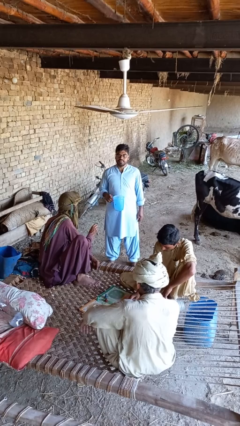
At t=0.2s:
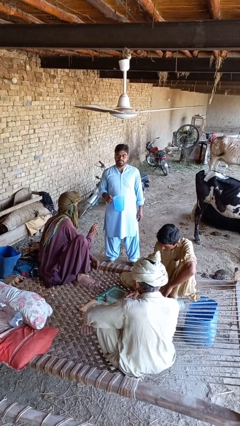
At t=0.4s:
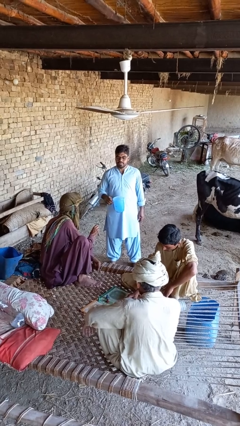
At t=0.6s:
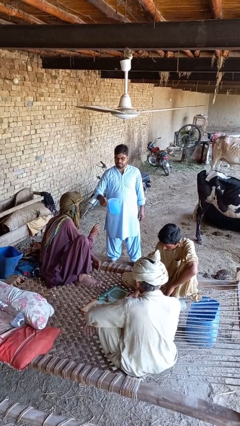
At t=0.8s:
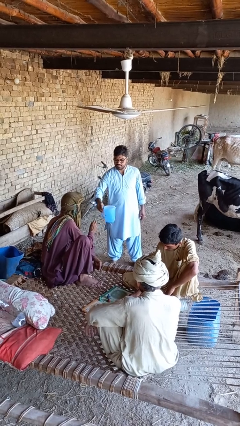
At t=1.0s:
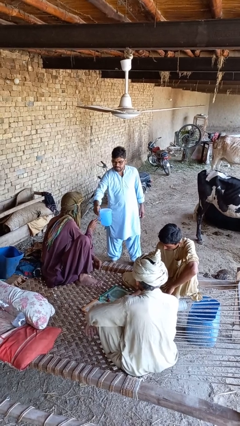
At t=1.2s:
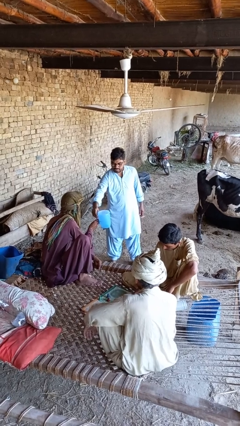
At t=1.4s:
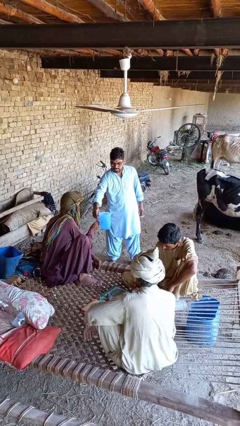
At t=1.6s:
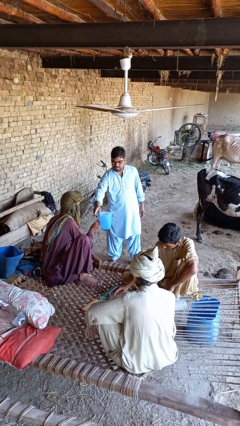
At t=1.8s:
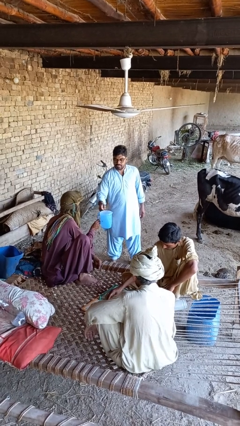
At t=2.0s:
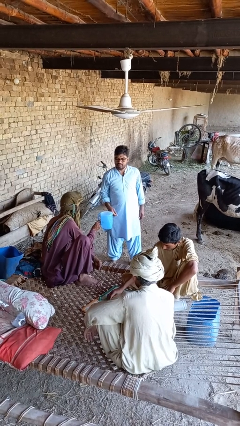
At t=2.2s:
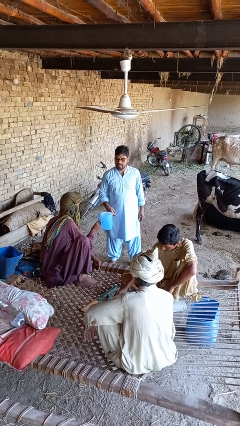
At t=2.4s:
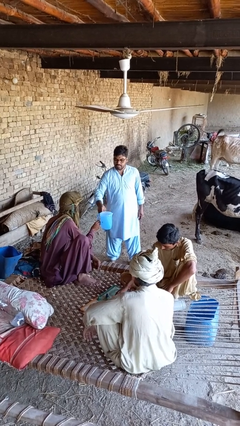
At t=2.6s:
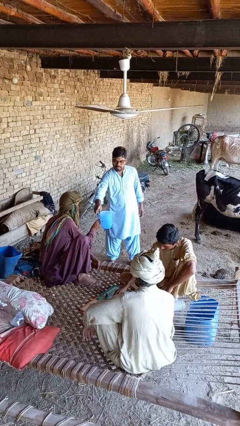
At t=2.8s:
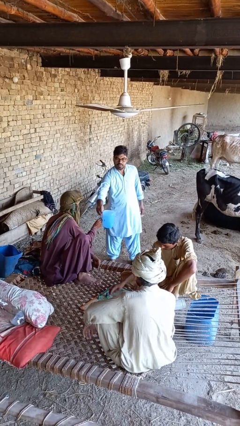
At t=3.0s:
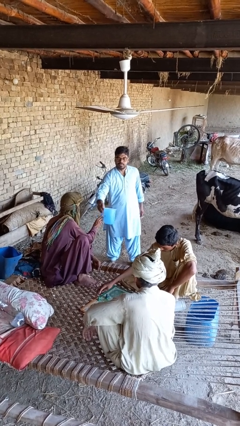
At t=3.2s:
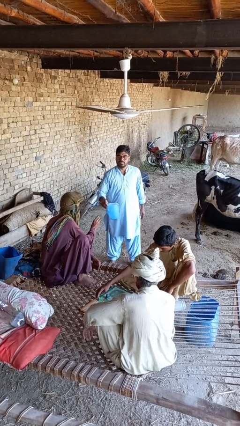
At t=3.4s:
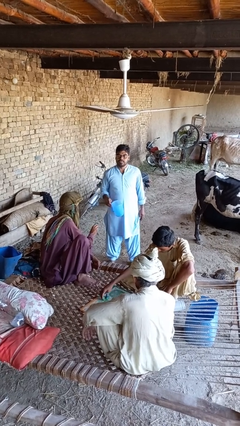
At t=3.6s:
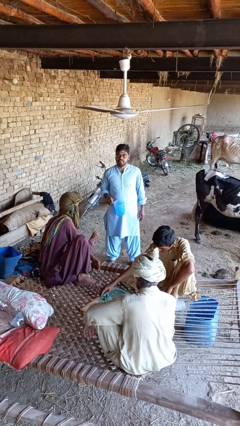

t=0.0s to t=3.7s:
person transfers object to person

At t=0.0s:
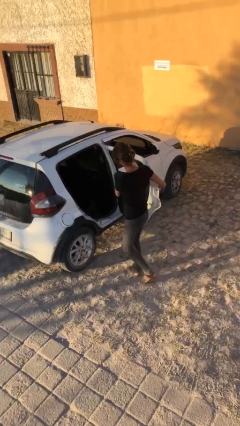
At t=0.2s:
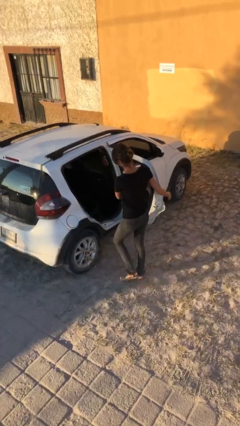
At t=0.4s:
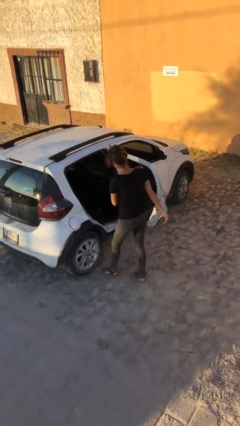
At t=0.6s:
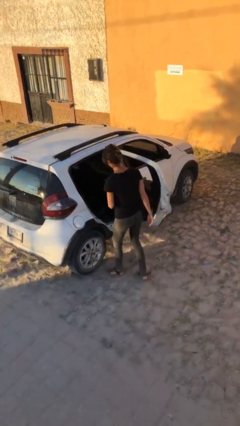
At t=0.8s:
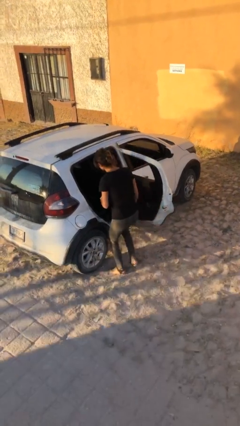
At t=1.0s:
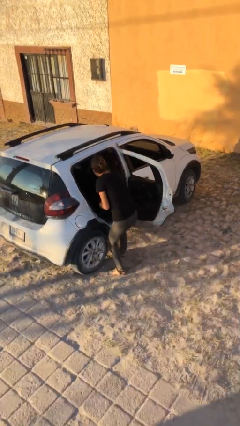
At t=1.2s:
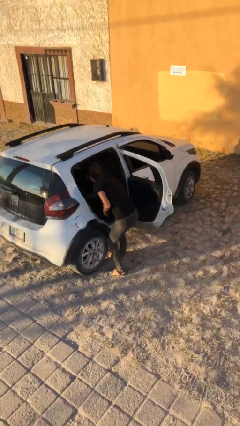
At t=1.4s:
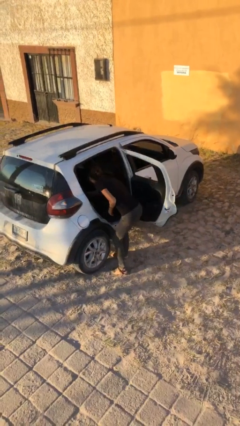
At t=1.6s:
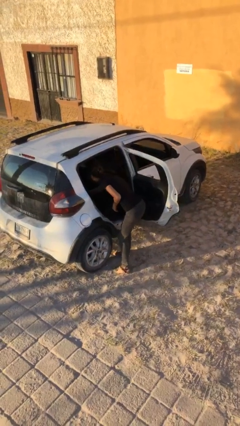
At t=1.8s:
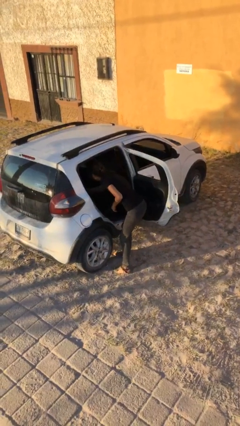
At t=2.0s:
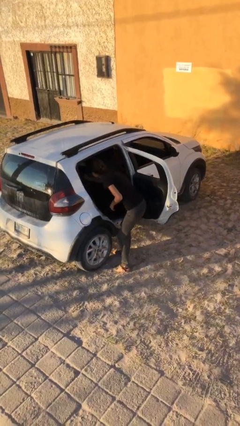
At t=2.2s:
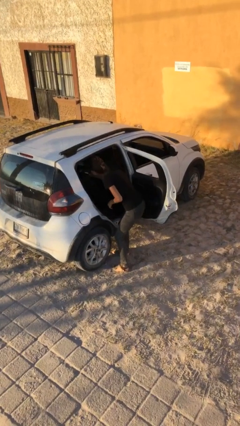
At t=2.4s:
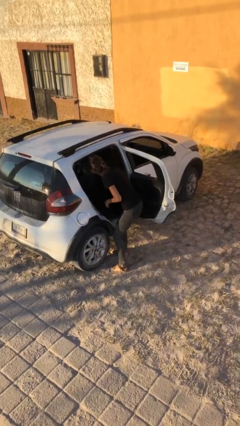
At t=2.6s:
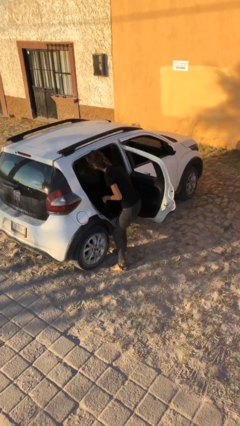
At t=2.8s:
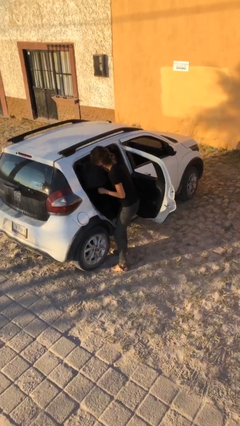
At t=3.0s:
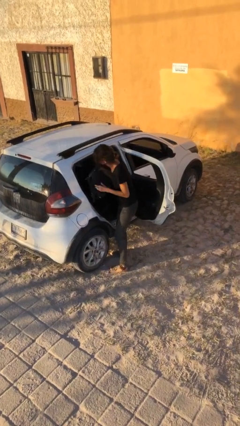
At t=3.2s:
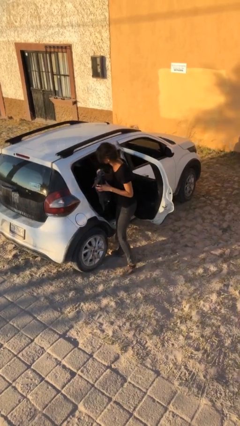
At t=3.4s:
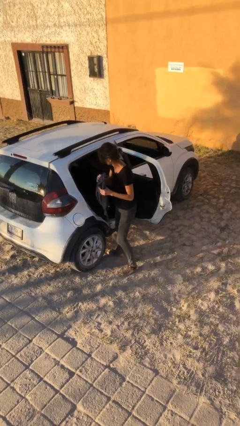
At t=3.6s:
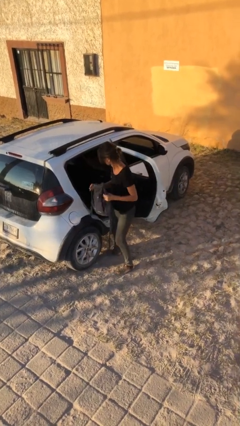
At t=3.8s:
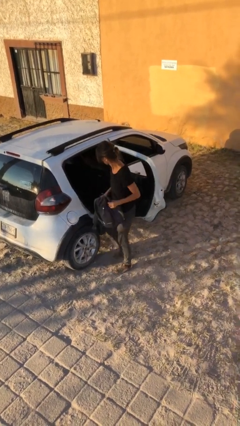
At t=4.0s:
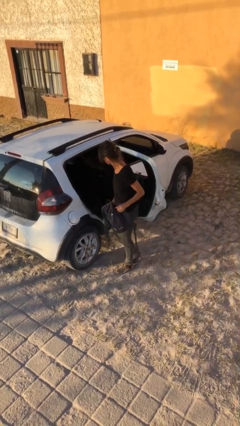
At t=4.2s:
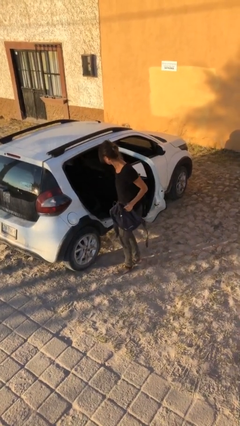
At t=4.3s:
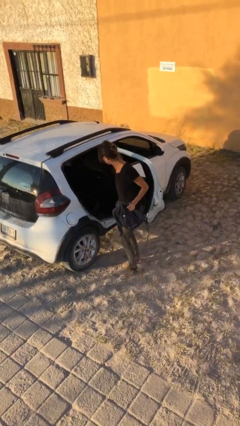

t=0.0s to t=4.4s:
person unloads car

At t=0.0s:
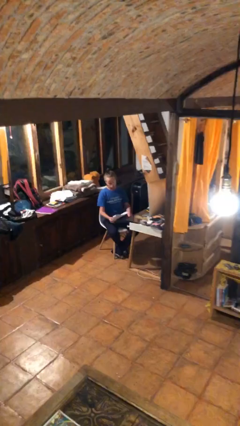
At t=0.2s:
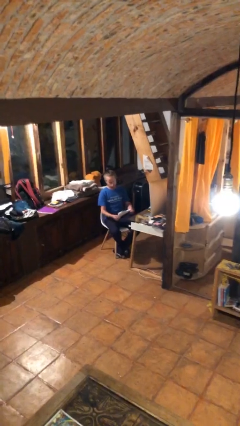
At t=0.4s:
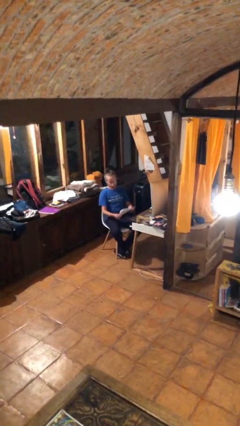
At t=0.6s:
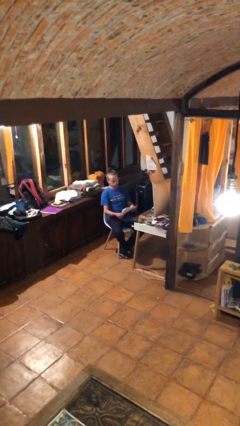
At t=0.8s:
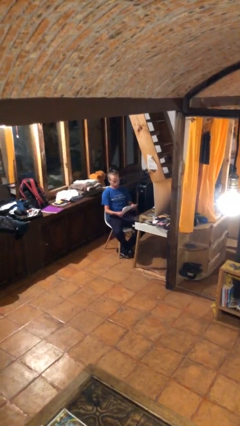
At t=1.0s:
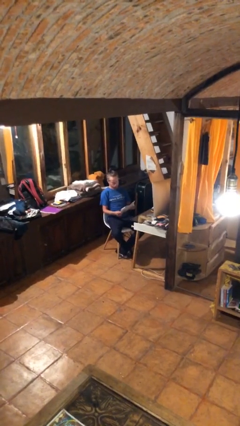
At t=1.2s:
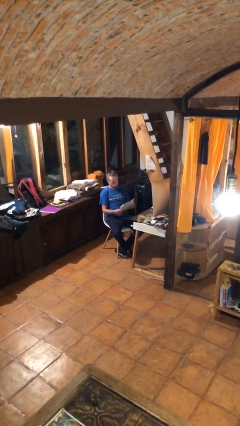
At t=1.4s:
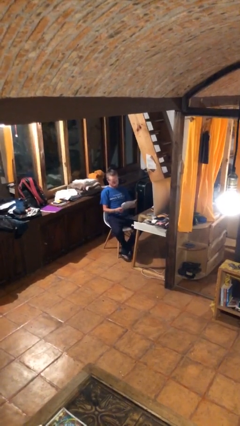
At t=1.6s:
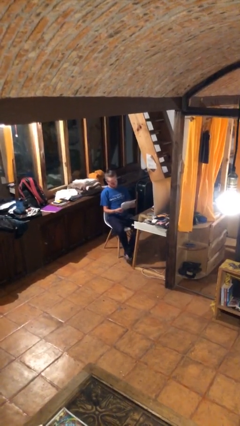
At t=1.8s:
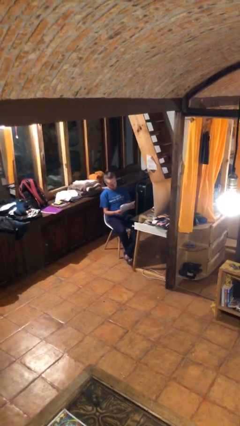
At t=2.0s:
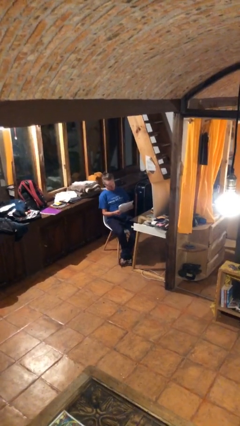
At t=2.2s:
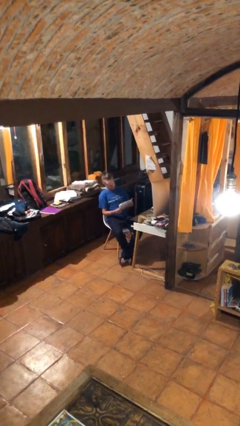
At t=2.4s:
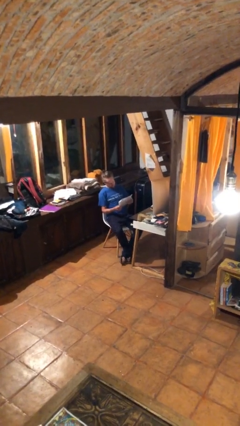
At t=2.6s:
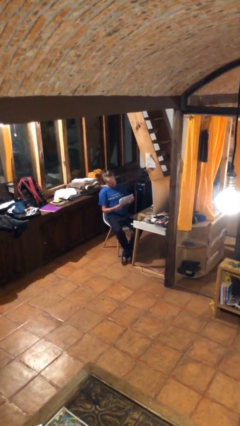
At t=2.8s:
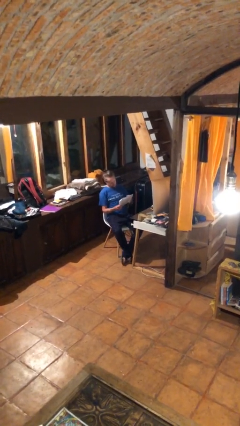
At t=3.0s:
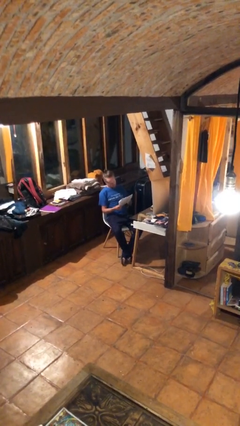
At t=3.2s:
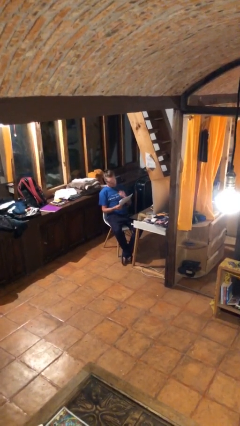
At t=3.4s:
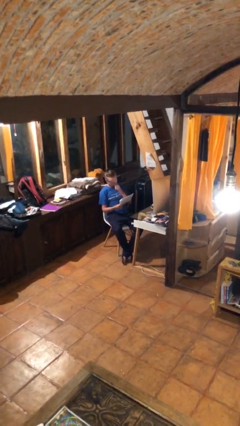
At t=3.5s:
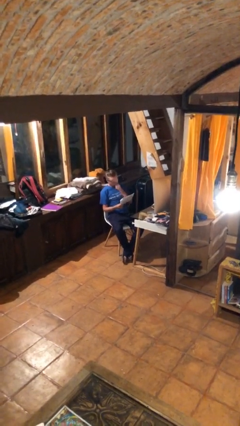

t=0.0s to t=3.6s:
person reads document

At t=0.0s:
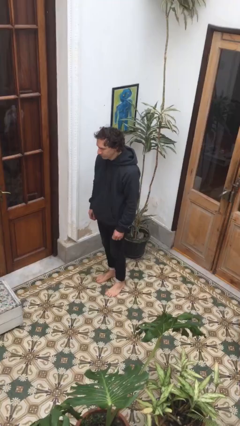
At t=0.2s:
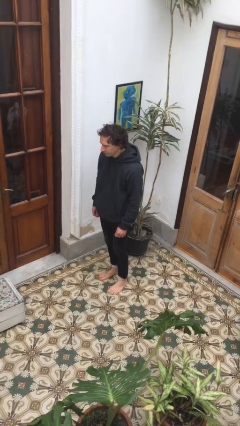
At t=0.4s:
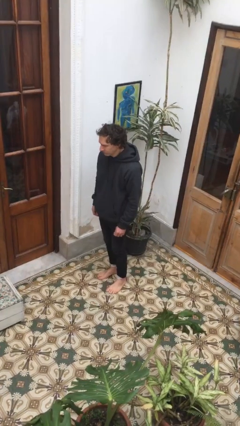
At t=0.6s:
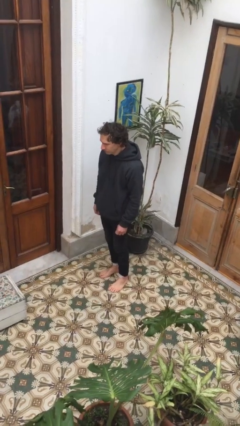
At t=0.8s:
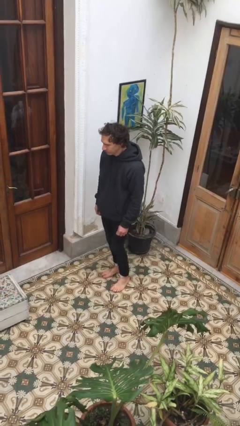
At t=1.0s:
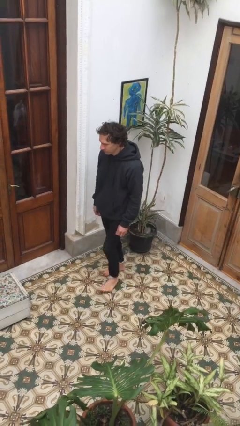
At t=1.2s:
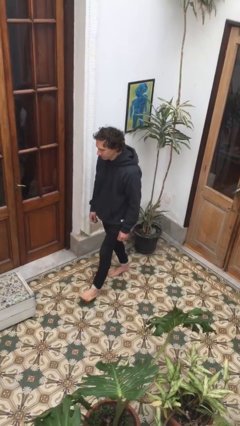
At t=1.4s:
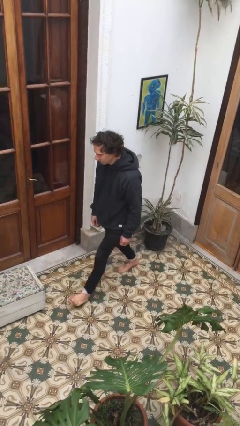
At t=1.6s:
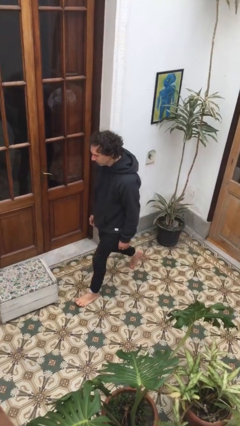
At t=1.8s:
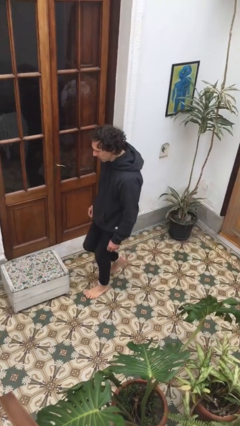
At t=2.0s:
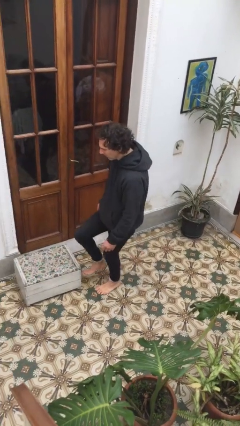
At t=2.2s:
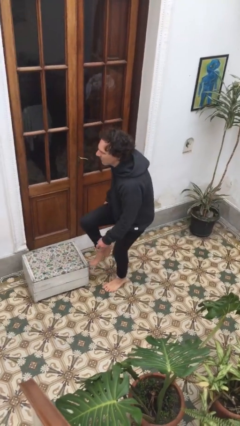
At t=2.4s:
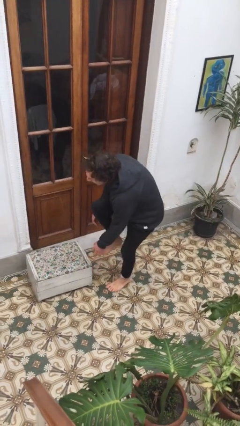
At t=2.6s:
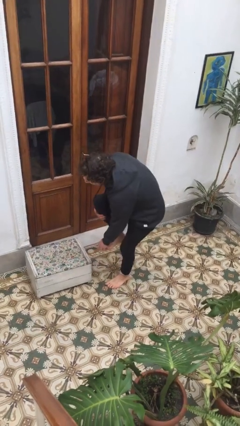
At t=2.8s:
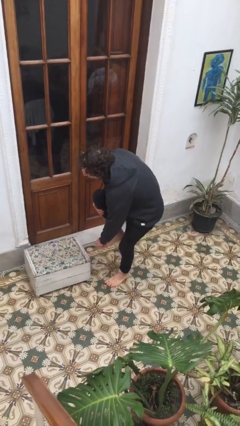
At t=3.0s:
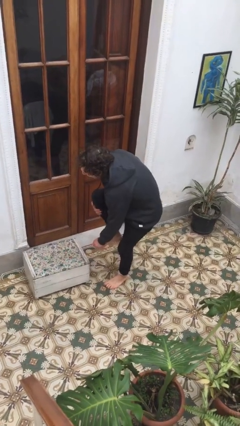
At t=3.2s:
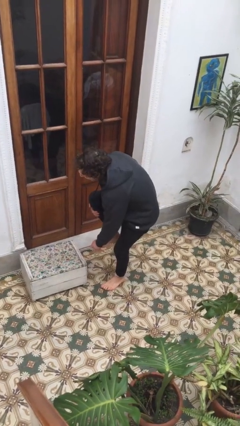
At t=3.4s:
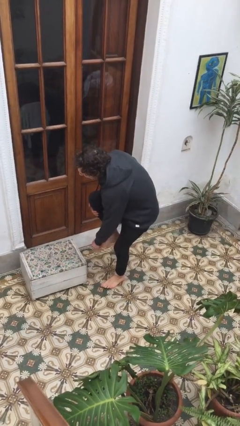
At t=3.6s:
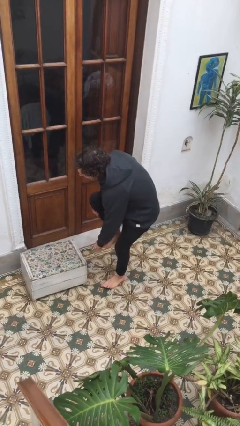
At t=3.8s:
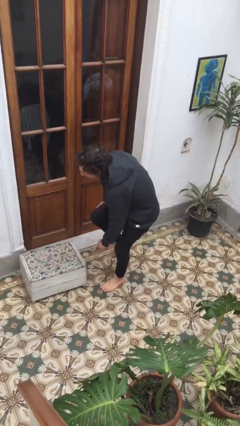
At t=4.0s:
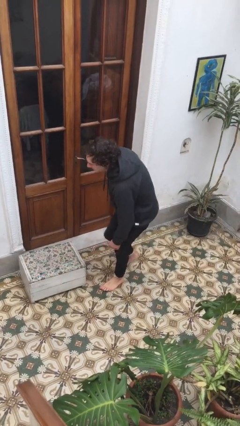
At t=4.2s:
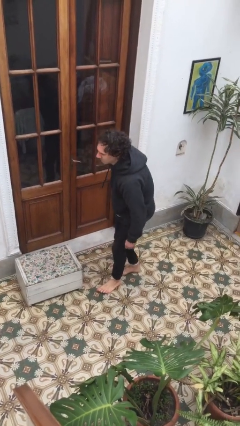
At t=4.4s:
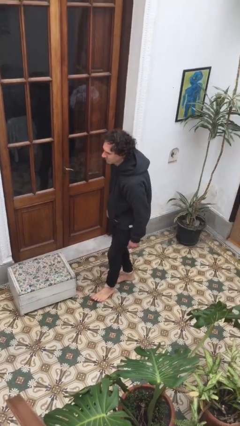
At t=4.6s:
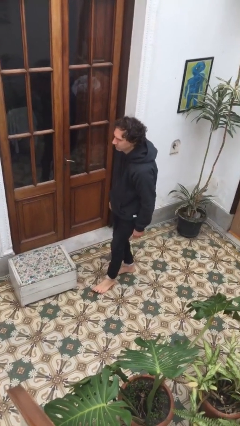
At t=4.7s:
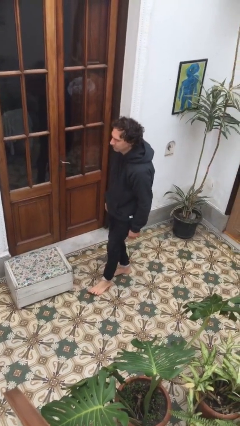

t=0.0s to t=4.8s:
person stubs toe

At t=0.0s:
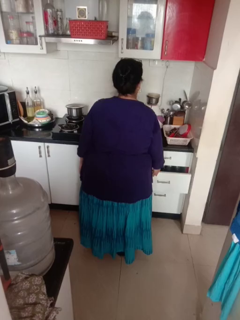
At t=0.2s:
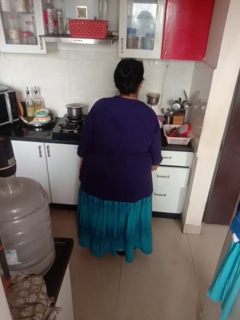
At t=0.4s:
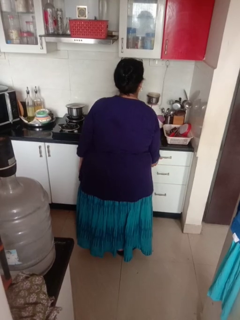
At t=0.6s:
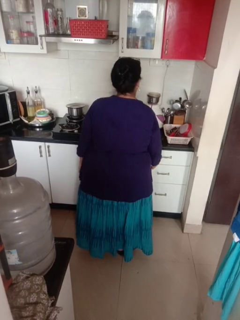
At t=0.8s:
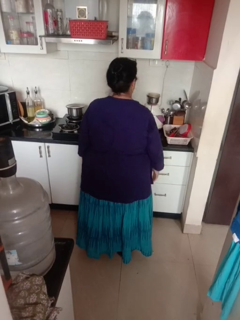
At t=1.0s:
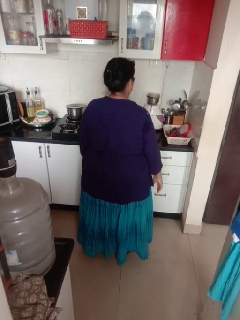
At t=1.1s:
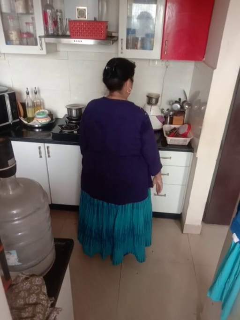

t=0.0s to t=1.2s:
person closes kitchen drawer

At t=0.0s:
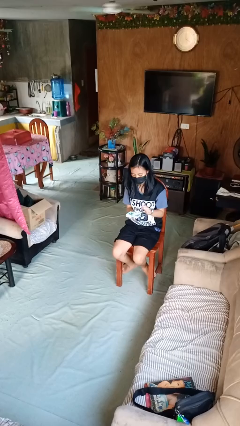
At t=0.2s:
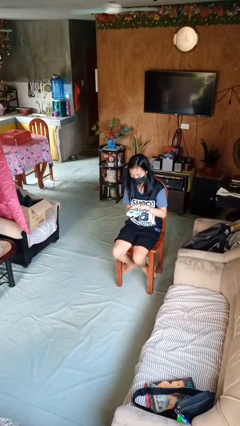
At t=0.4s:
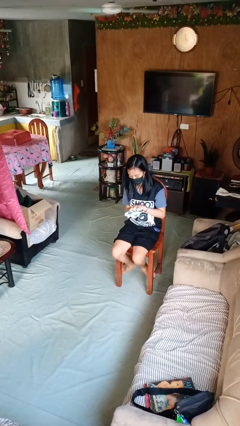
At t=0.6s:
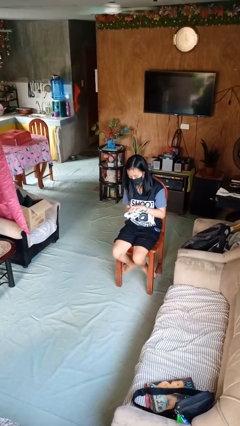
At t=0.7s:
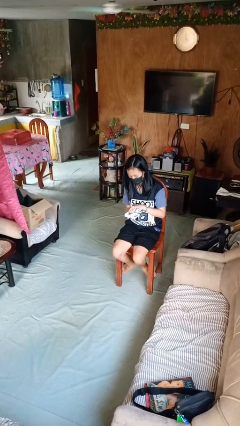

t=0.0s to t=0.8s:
person searches jewelry box
